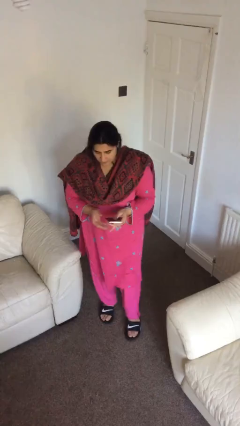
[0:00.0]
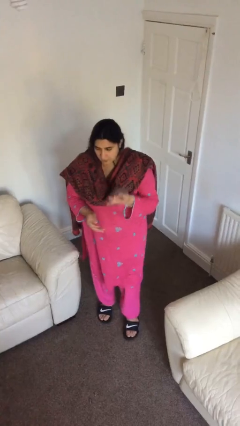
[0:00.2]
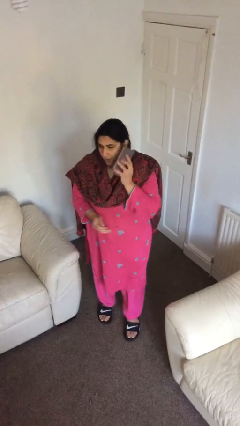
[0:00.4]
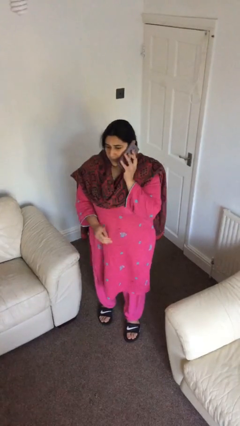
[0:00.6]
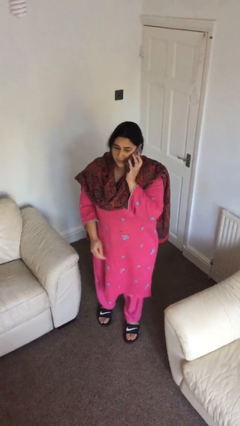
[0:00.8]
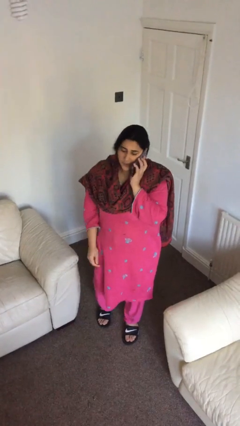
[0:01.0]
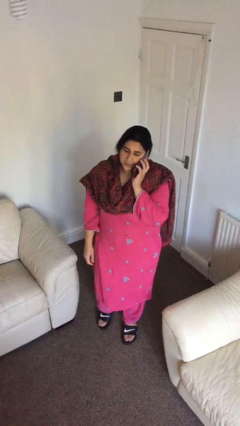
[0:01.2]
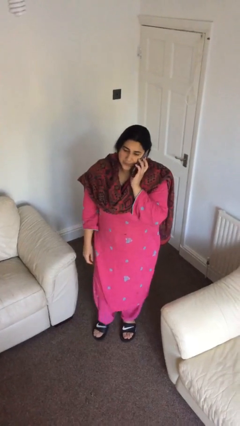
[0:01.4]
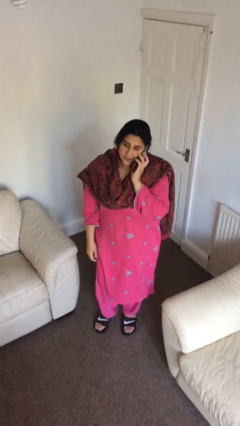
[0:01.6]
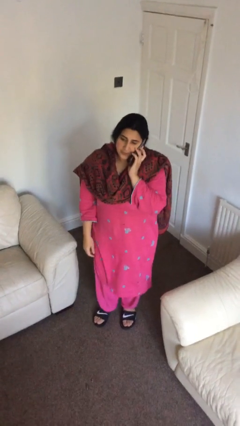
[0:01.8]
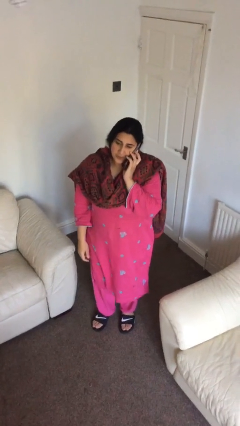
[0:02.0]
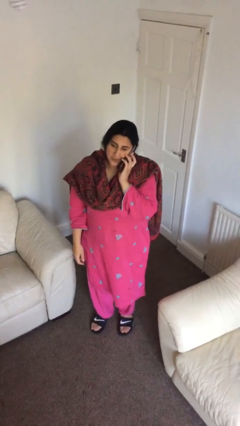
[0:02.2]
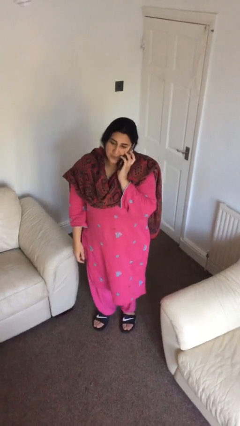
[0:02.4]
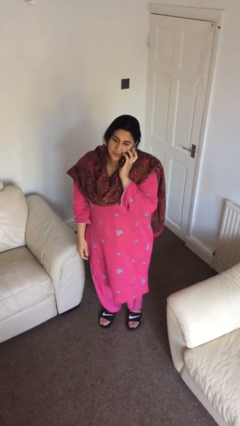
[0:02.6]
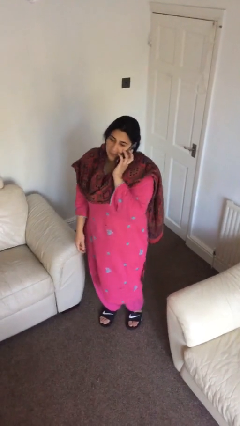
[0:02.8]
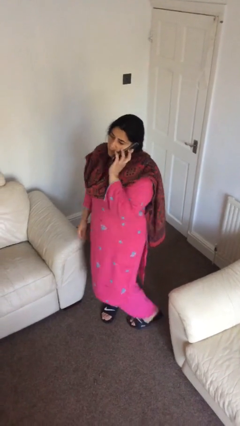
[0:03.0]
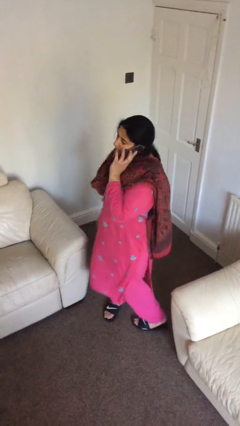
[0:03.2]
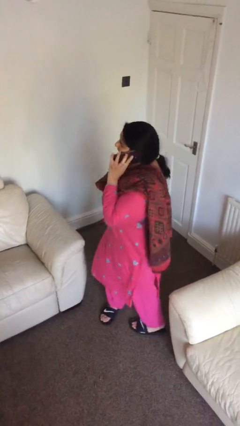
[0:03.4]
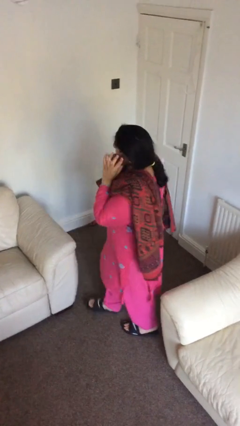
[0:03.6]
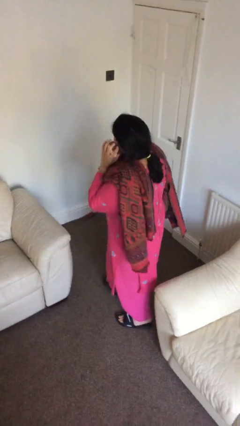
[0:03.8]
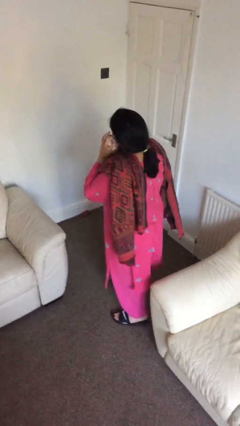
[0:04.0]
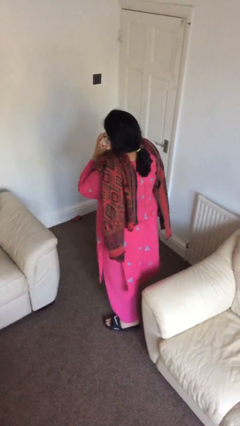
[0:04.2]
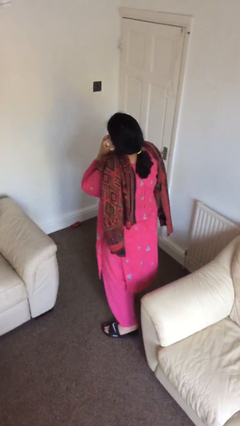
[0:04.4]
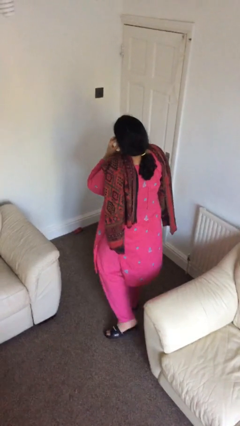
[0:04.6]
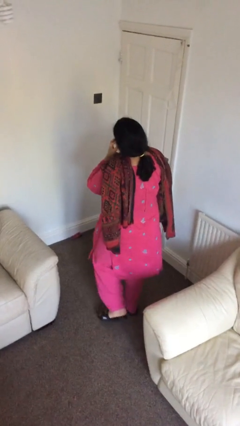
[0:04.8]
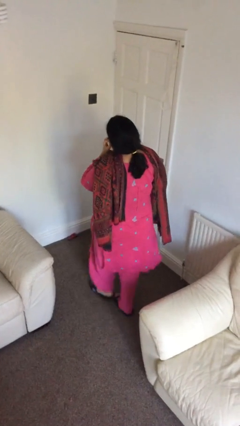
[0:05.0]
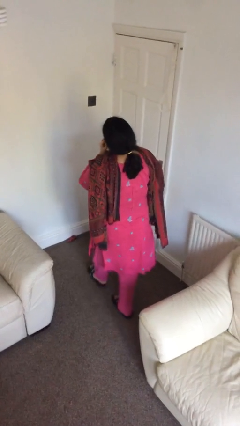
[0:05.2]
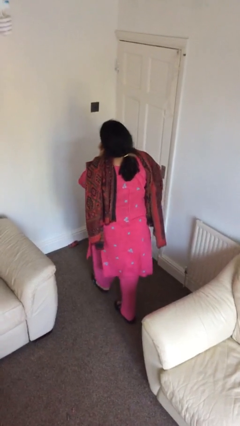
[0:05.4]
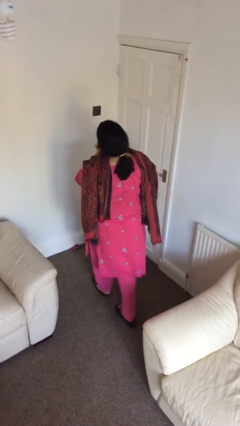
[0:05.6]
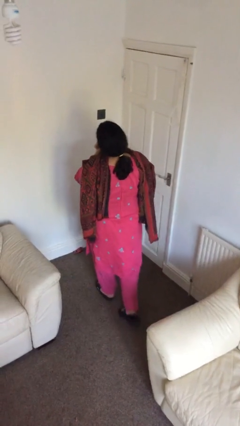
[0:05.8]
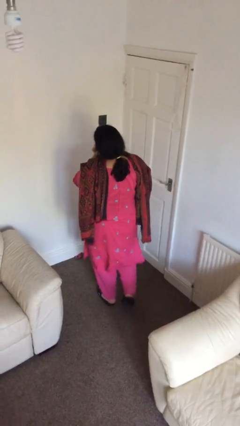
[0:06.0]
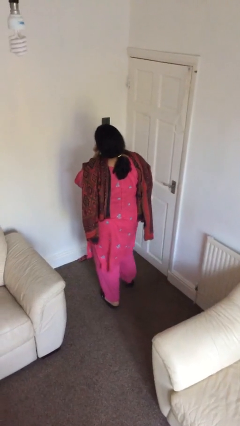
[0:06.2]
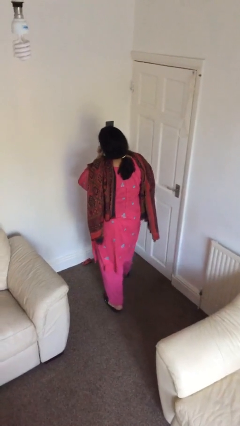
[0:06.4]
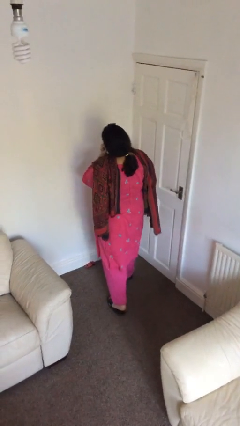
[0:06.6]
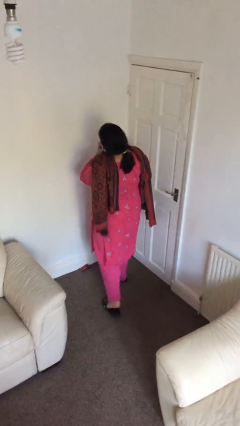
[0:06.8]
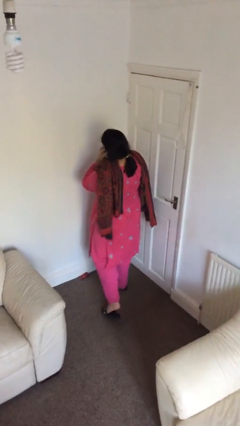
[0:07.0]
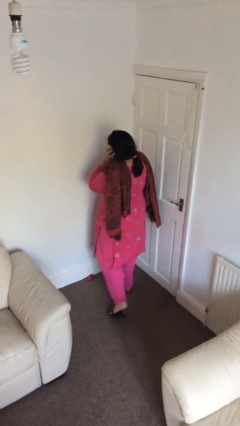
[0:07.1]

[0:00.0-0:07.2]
person talks on phone

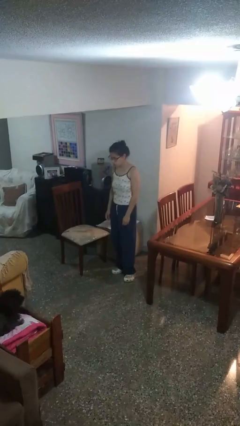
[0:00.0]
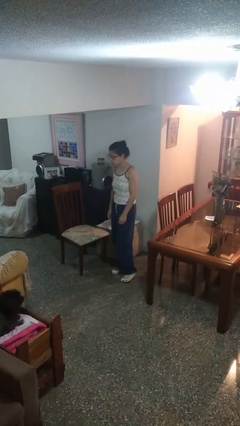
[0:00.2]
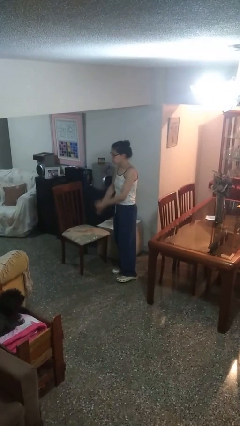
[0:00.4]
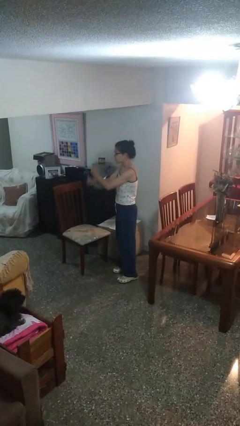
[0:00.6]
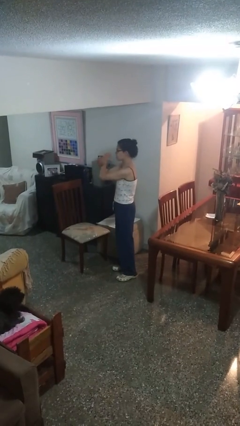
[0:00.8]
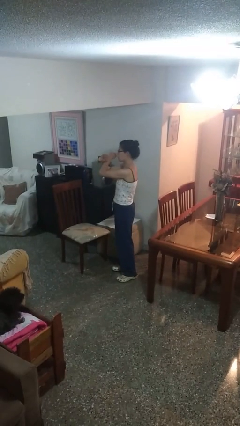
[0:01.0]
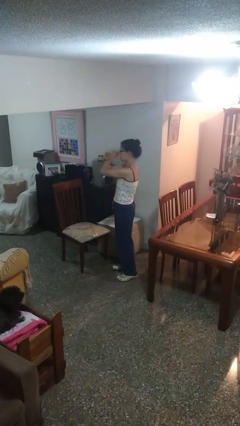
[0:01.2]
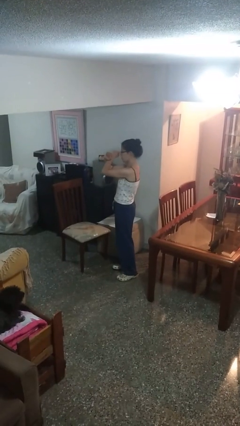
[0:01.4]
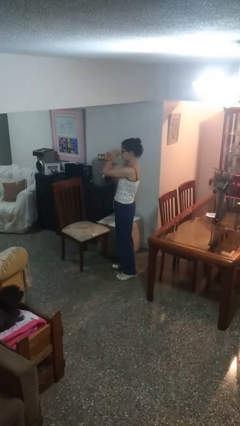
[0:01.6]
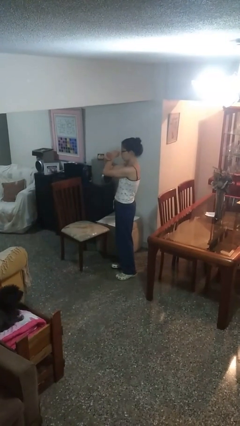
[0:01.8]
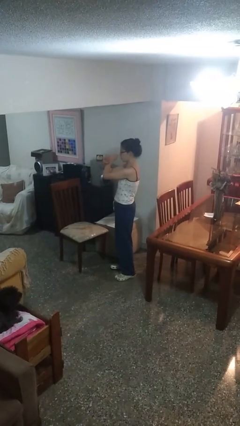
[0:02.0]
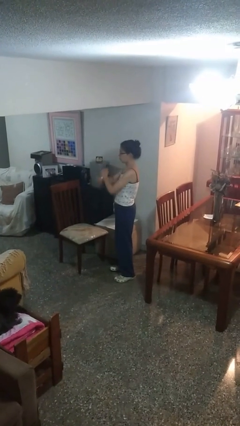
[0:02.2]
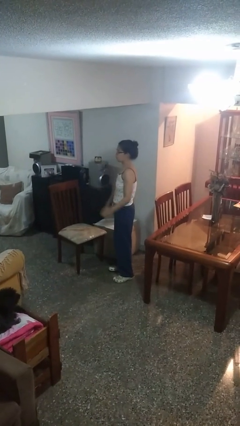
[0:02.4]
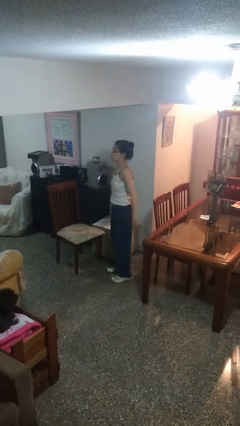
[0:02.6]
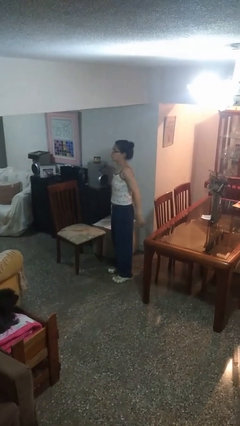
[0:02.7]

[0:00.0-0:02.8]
person gestures arms x

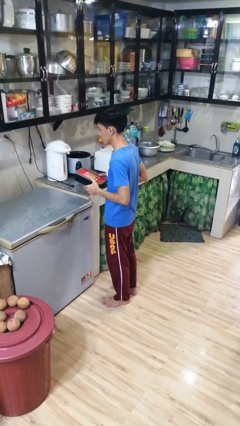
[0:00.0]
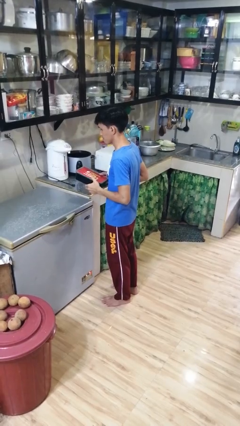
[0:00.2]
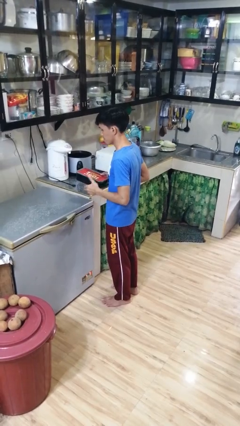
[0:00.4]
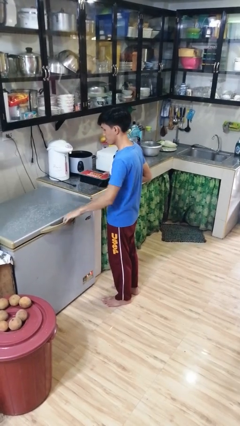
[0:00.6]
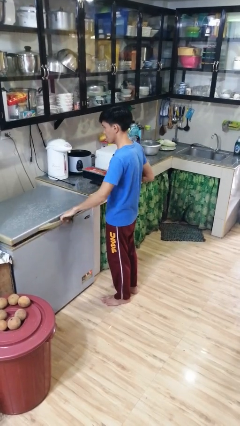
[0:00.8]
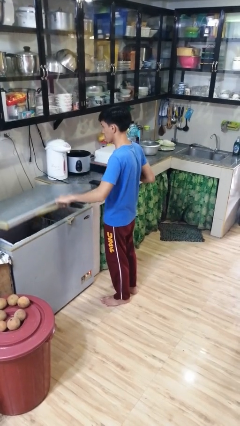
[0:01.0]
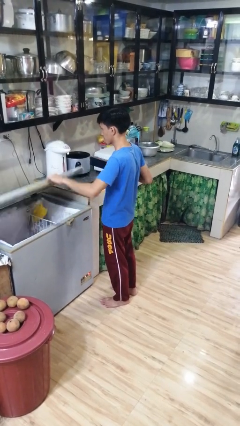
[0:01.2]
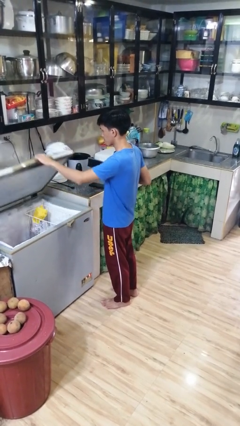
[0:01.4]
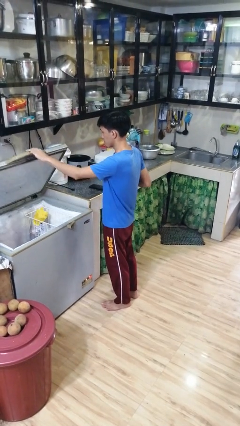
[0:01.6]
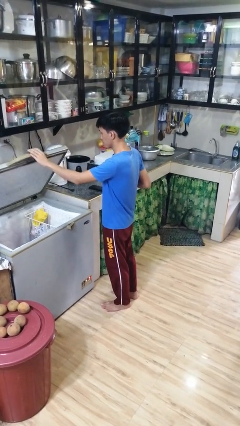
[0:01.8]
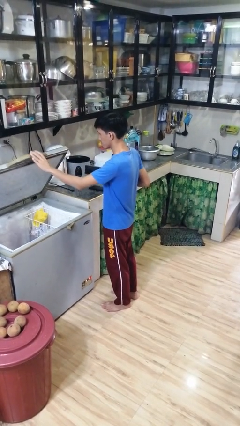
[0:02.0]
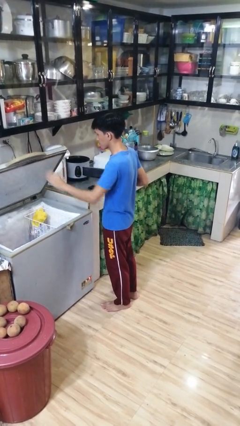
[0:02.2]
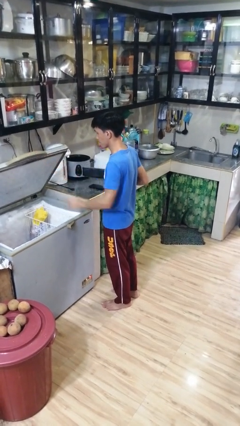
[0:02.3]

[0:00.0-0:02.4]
person opens refrigerator

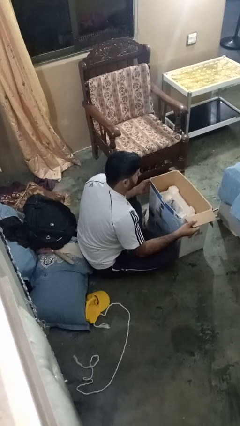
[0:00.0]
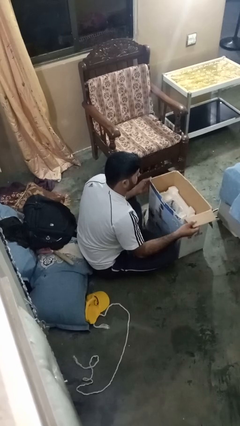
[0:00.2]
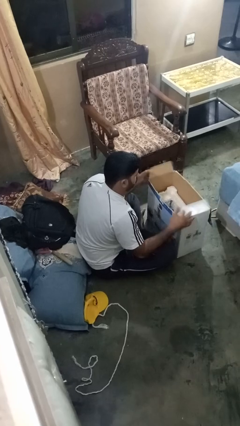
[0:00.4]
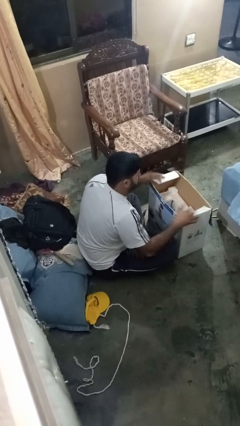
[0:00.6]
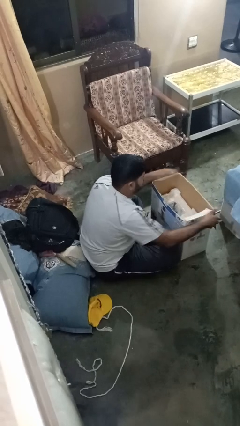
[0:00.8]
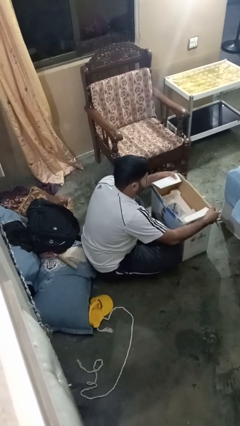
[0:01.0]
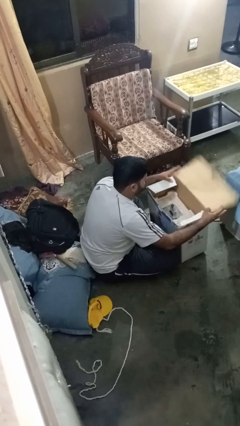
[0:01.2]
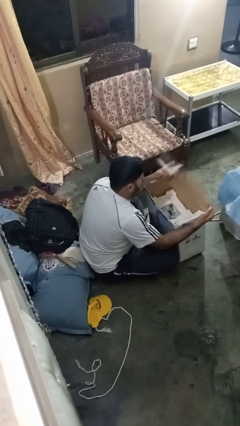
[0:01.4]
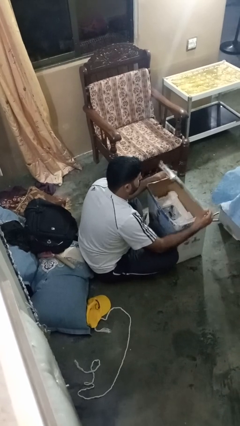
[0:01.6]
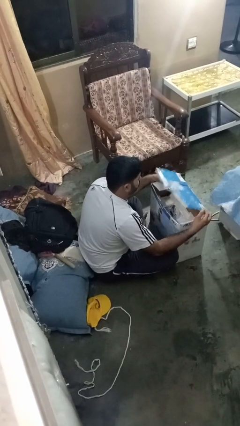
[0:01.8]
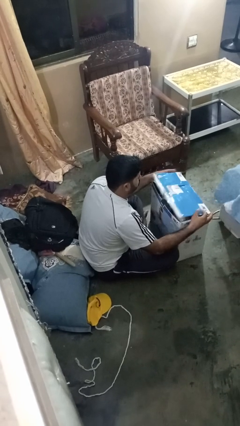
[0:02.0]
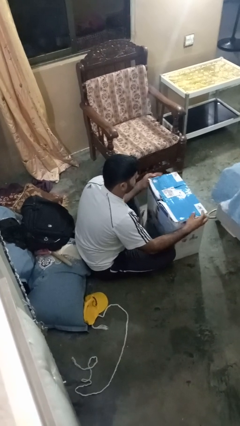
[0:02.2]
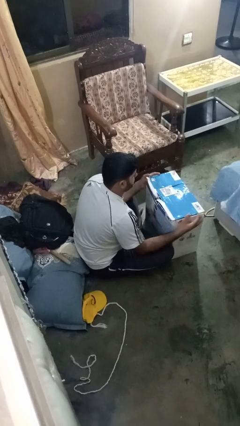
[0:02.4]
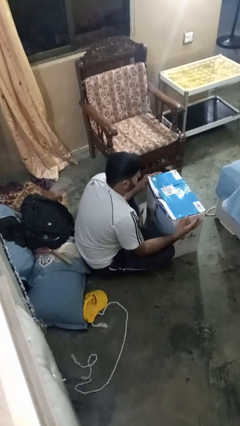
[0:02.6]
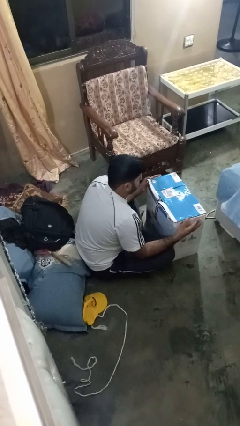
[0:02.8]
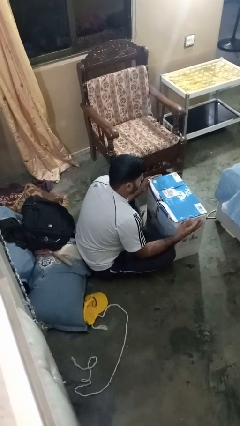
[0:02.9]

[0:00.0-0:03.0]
person closes box

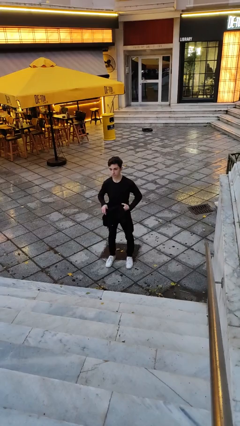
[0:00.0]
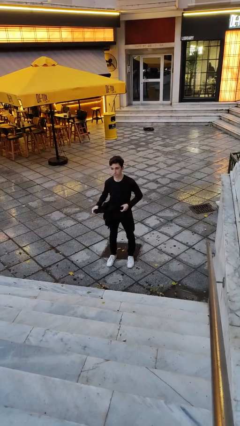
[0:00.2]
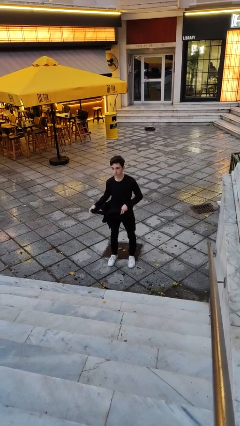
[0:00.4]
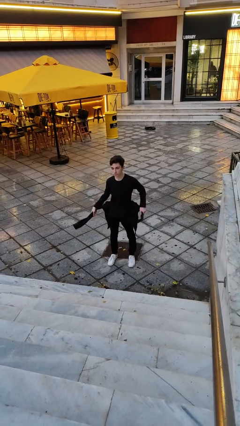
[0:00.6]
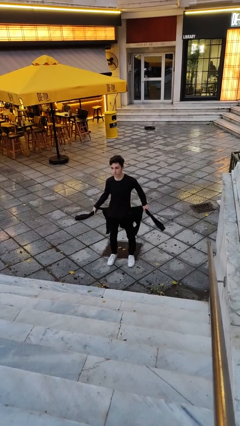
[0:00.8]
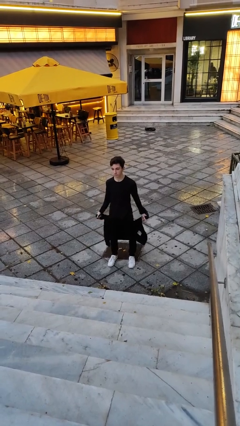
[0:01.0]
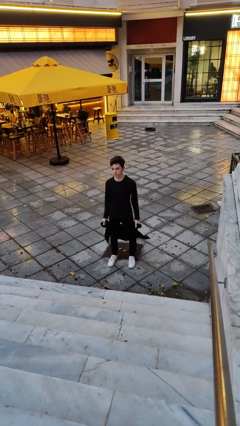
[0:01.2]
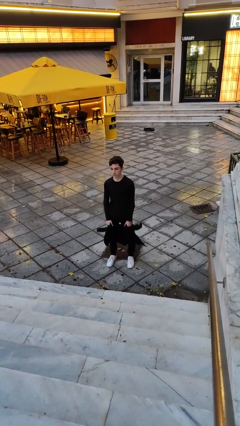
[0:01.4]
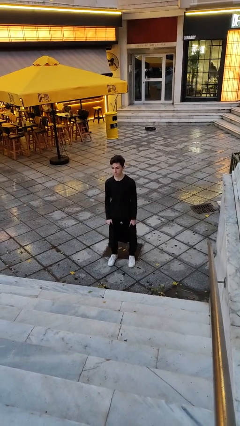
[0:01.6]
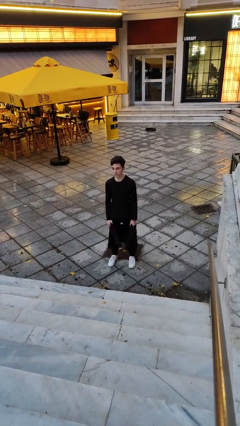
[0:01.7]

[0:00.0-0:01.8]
person unties jacket around waist

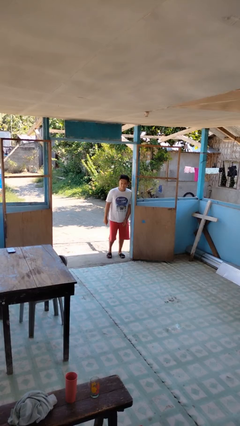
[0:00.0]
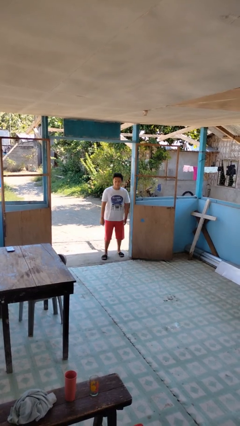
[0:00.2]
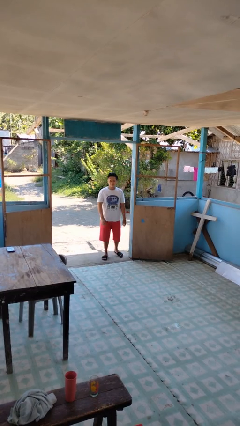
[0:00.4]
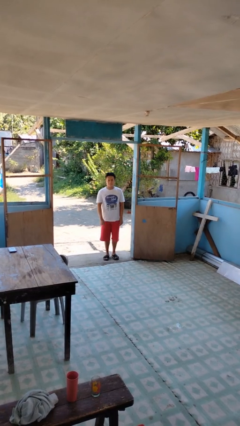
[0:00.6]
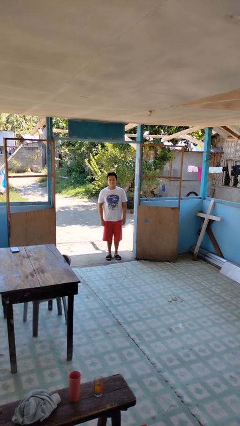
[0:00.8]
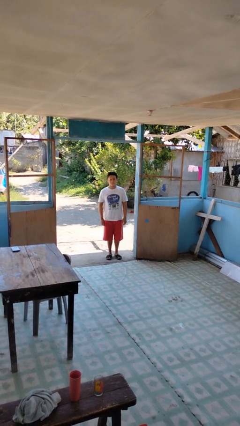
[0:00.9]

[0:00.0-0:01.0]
person bumps into wall
